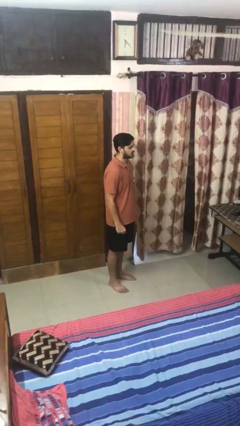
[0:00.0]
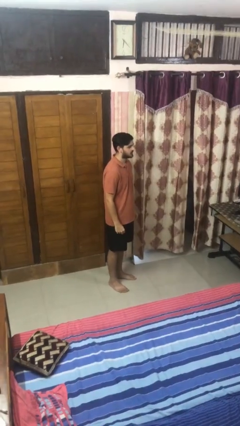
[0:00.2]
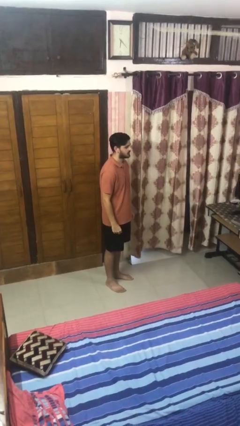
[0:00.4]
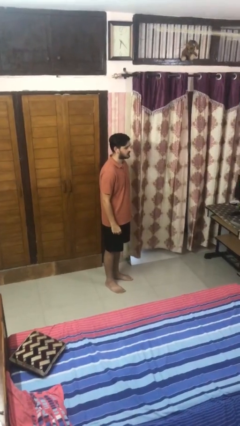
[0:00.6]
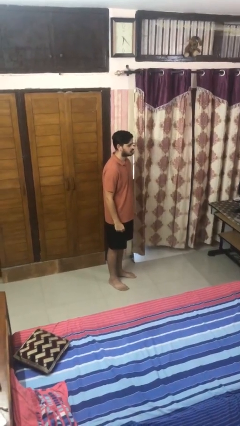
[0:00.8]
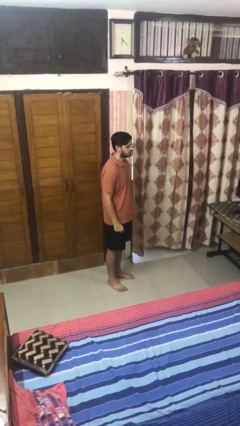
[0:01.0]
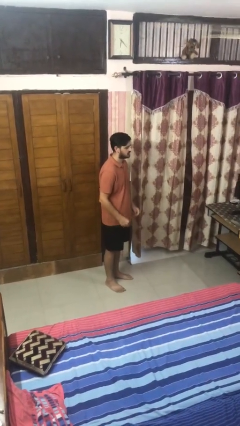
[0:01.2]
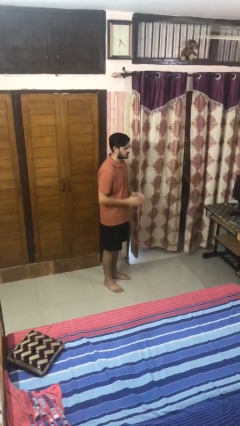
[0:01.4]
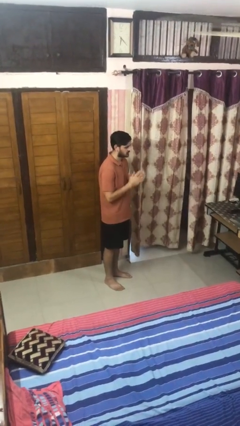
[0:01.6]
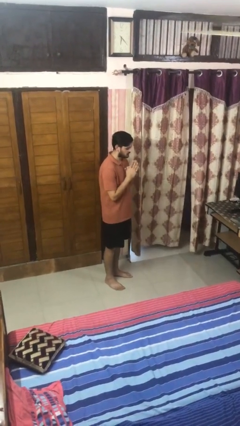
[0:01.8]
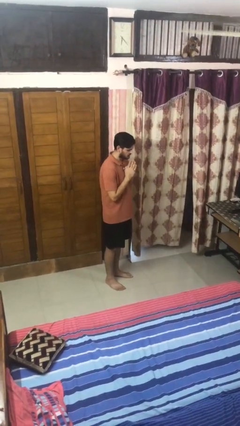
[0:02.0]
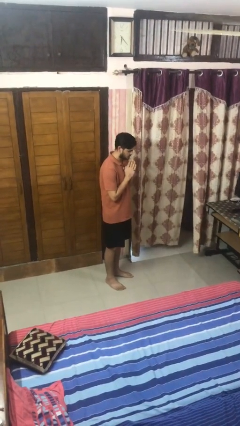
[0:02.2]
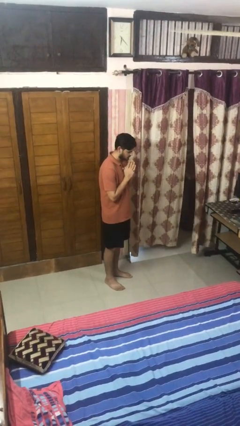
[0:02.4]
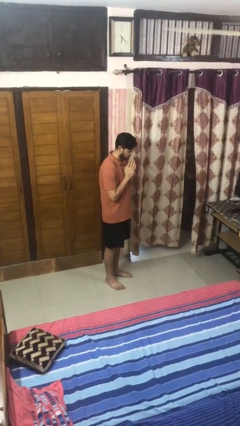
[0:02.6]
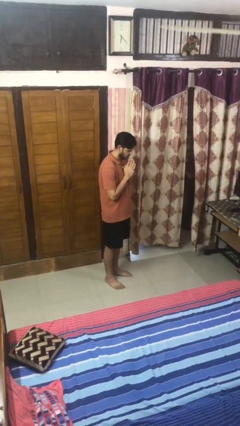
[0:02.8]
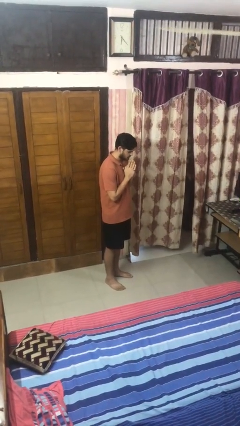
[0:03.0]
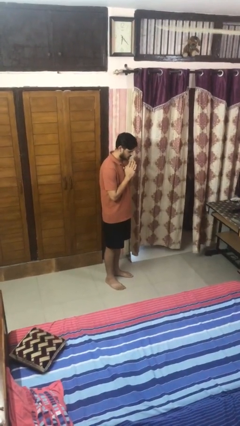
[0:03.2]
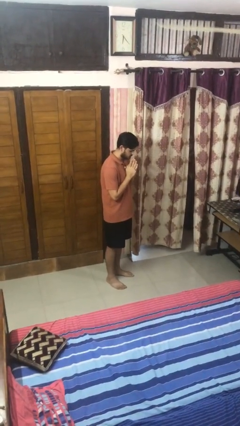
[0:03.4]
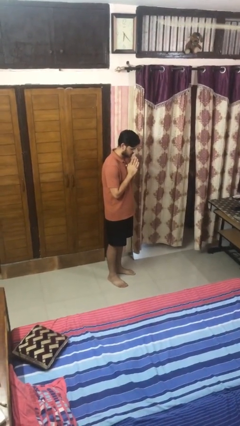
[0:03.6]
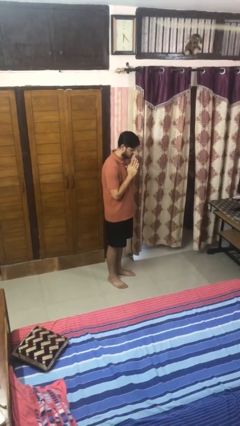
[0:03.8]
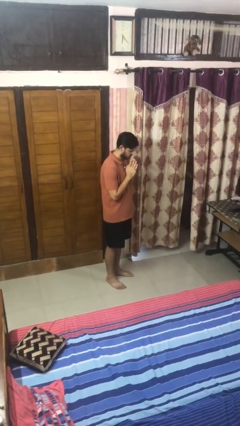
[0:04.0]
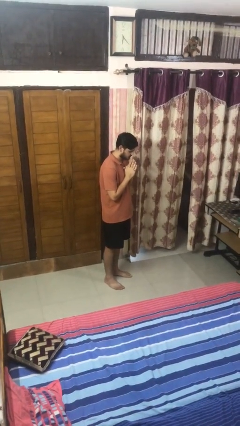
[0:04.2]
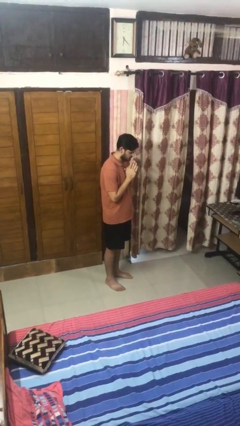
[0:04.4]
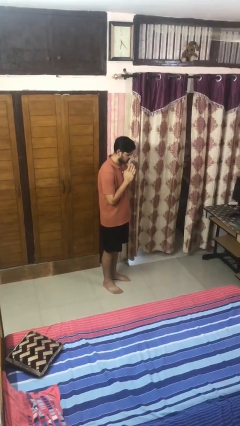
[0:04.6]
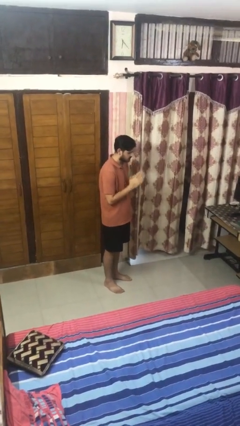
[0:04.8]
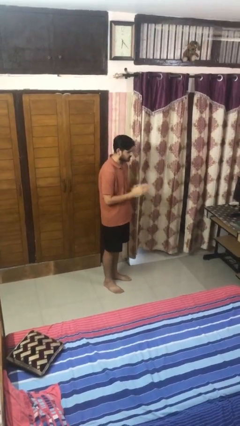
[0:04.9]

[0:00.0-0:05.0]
person prays

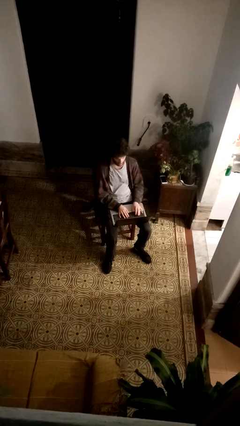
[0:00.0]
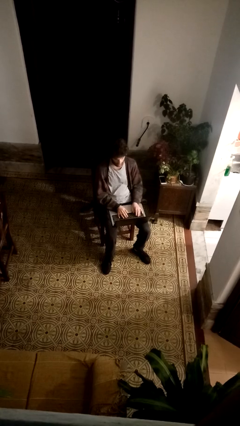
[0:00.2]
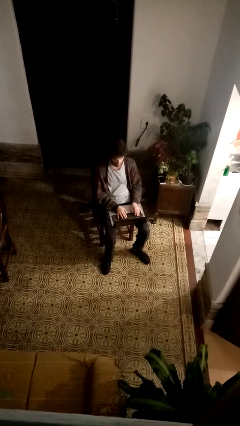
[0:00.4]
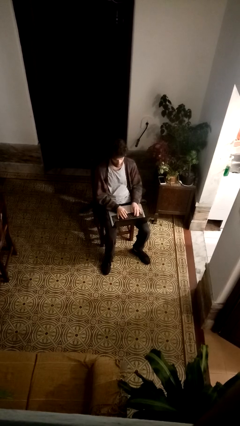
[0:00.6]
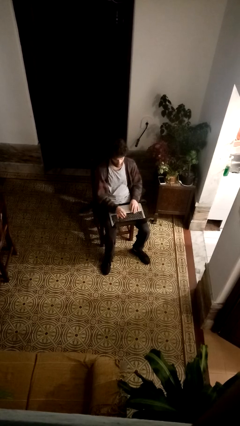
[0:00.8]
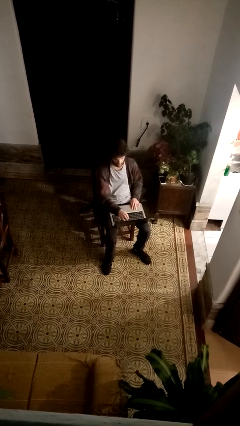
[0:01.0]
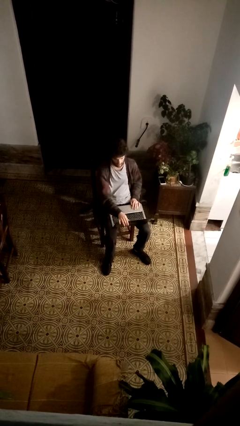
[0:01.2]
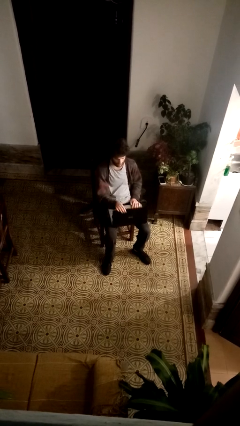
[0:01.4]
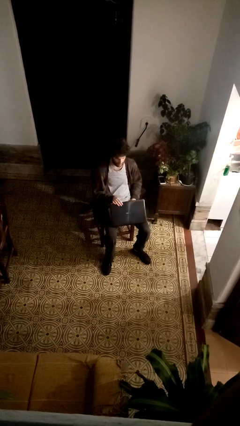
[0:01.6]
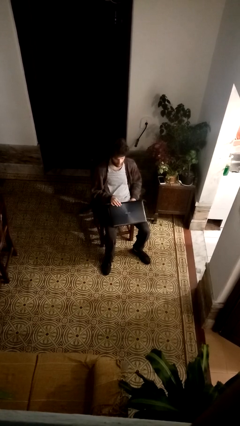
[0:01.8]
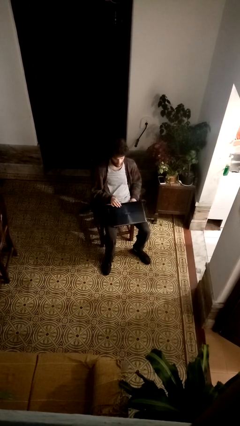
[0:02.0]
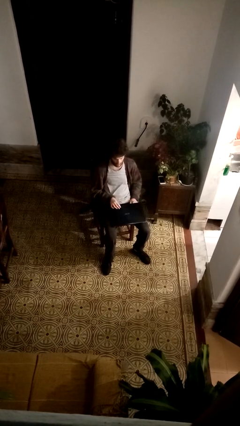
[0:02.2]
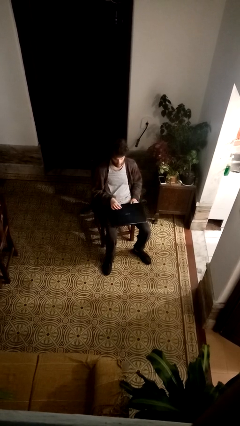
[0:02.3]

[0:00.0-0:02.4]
person closes laptop

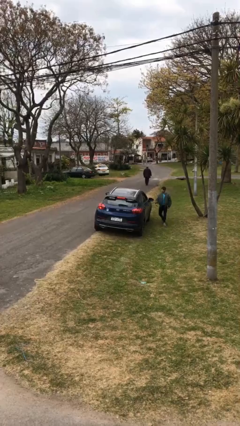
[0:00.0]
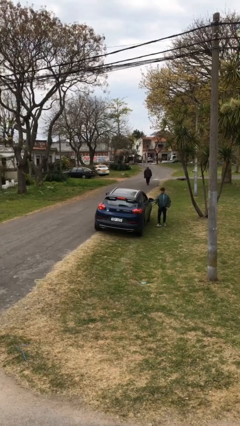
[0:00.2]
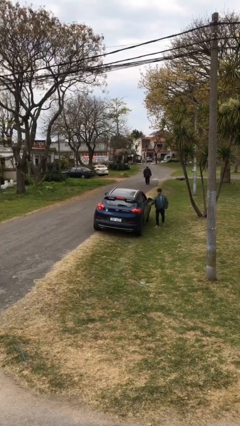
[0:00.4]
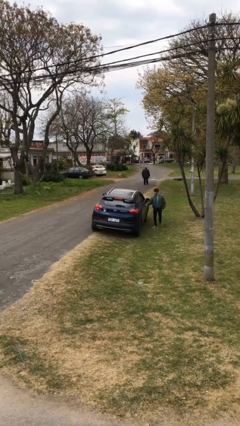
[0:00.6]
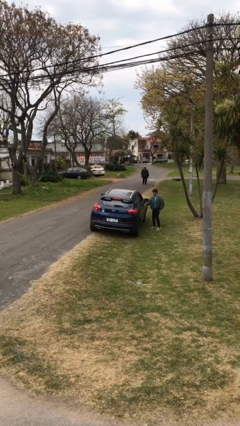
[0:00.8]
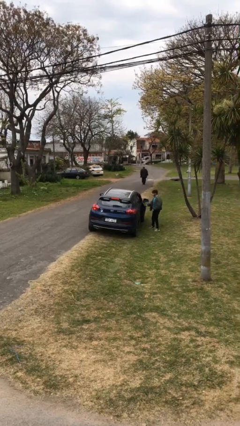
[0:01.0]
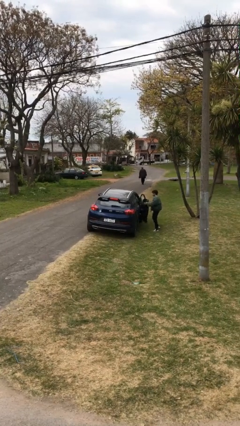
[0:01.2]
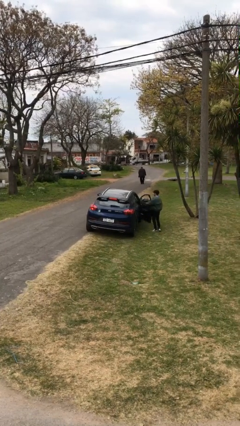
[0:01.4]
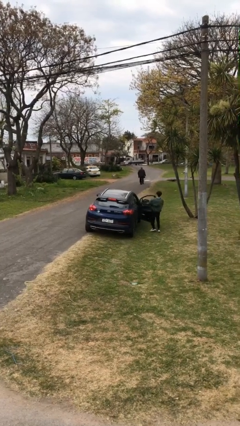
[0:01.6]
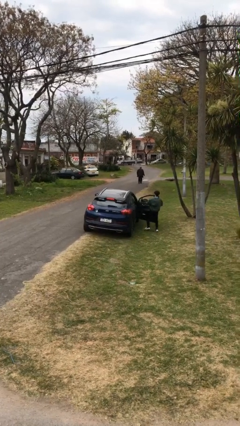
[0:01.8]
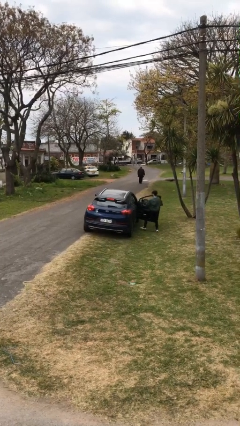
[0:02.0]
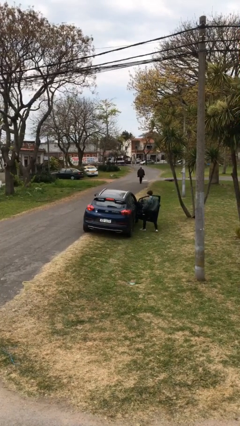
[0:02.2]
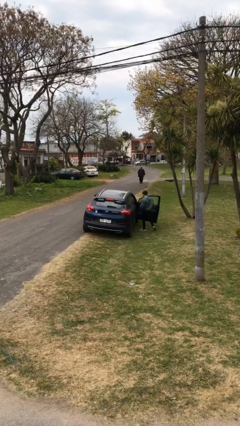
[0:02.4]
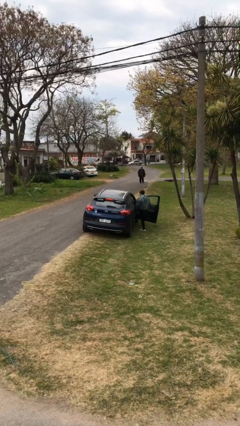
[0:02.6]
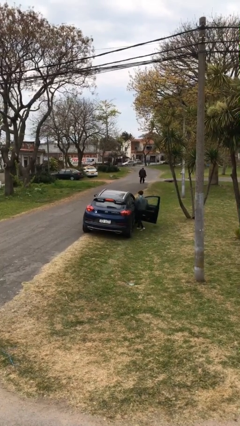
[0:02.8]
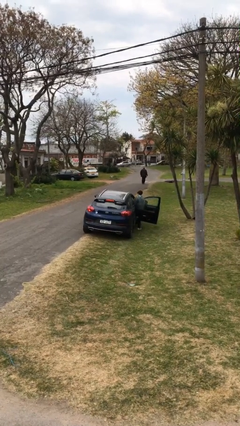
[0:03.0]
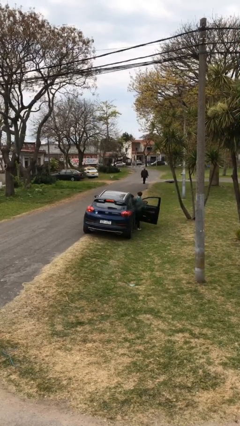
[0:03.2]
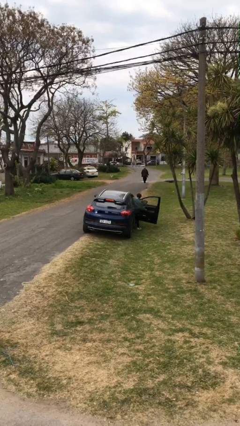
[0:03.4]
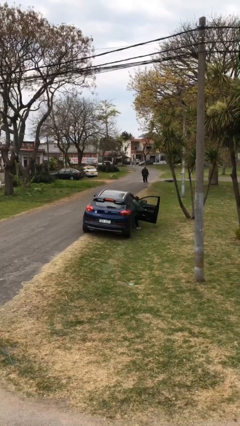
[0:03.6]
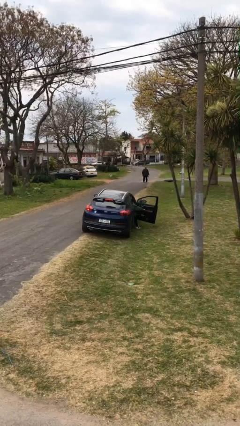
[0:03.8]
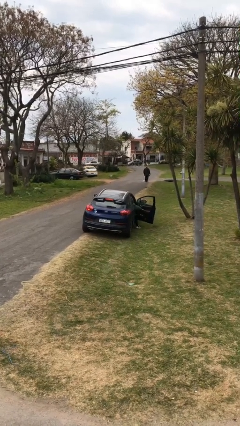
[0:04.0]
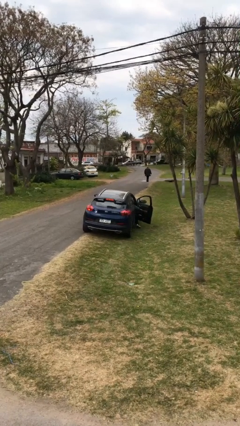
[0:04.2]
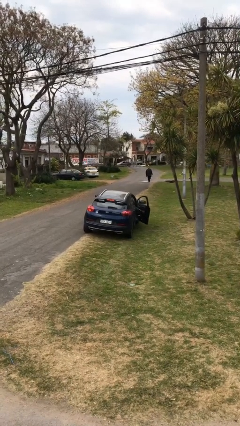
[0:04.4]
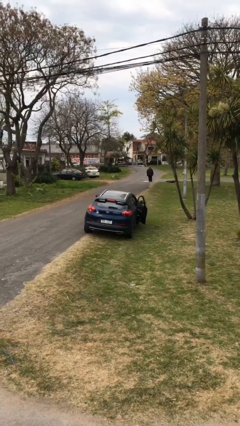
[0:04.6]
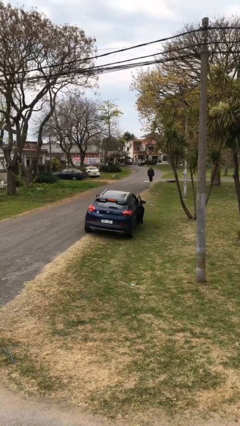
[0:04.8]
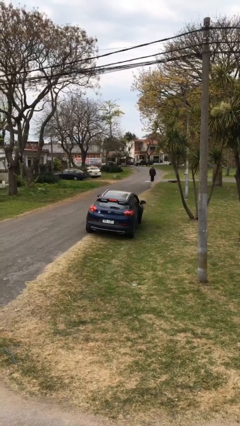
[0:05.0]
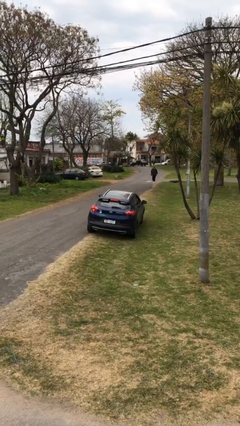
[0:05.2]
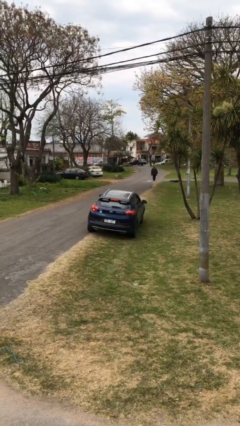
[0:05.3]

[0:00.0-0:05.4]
car picks up person

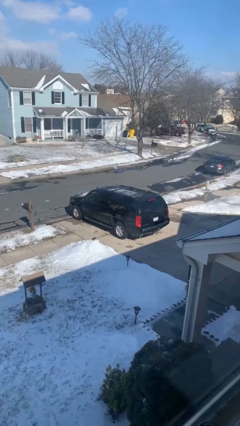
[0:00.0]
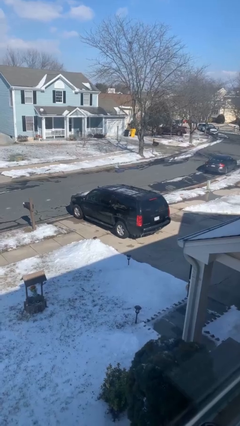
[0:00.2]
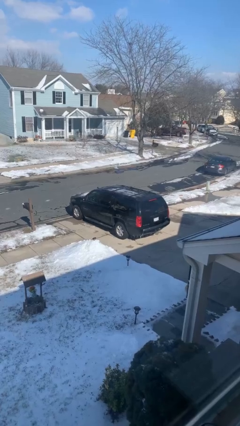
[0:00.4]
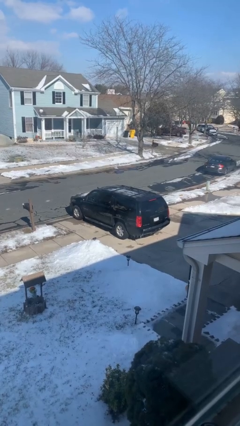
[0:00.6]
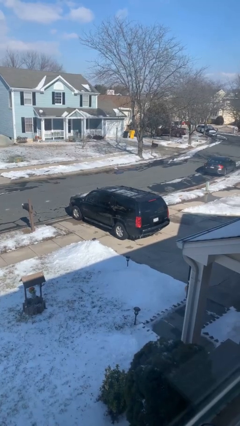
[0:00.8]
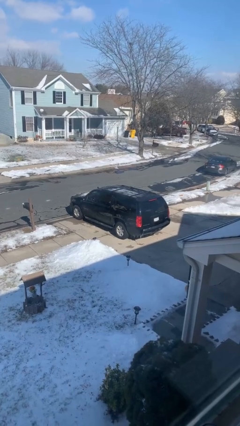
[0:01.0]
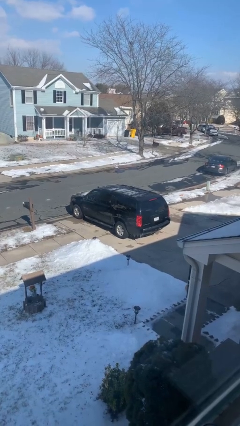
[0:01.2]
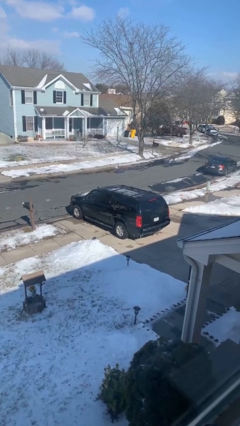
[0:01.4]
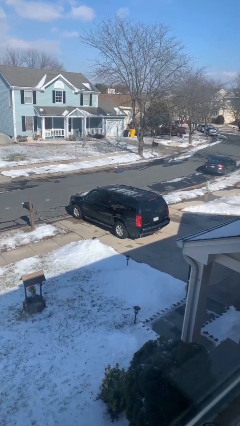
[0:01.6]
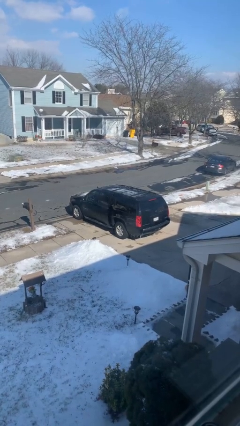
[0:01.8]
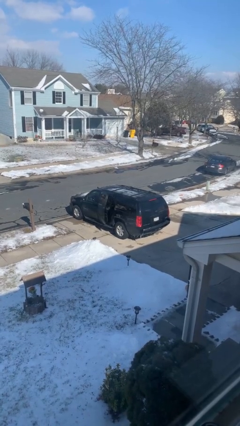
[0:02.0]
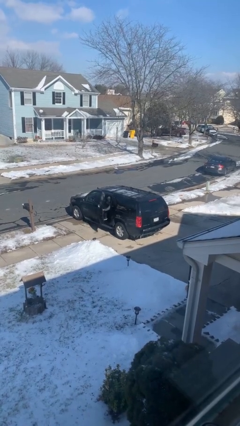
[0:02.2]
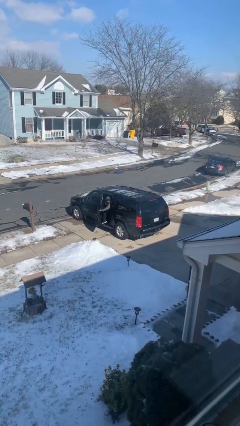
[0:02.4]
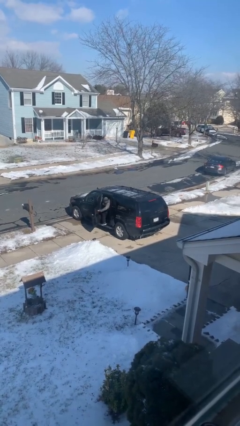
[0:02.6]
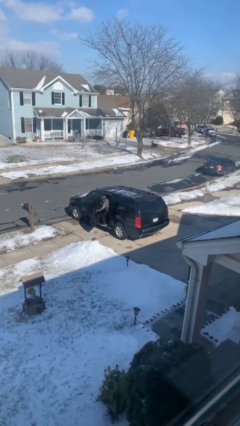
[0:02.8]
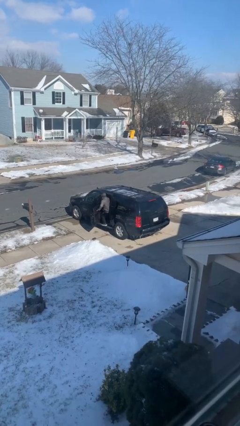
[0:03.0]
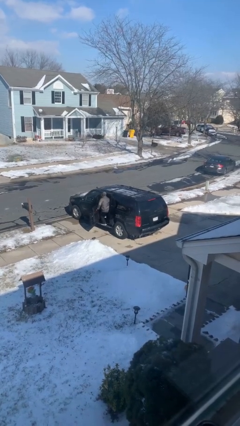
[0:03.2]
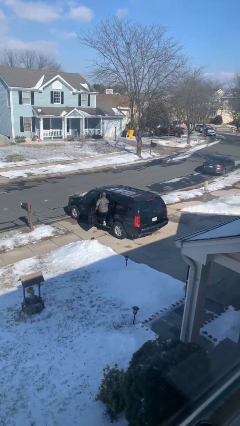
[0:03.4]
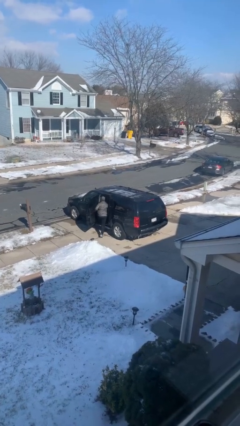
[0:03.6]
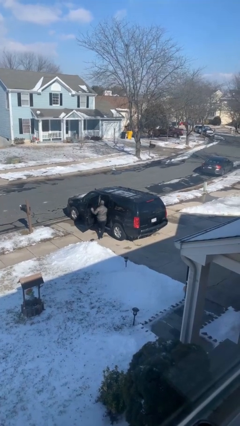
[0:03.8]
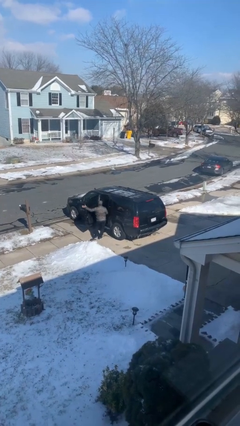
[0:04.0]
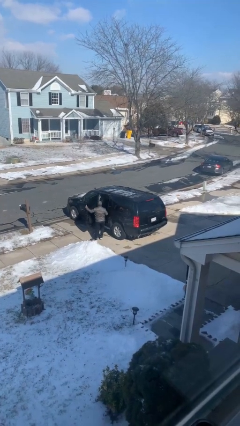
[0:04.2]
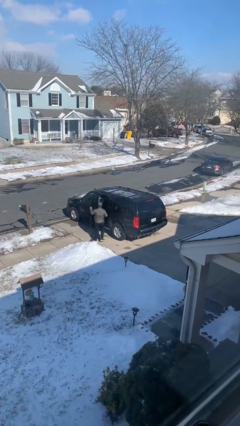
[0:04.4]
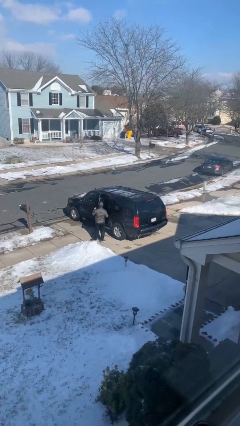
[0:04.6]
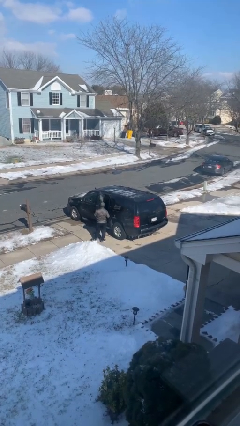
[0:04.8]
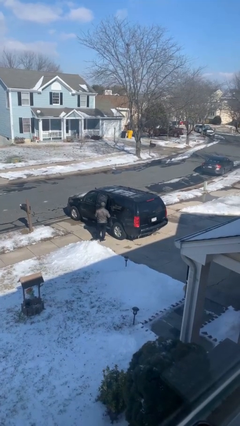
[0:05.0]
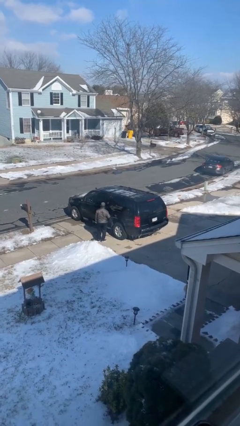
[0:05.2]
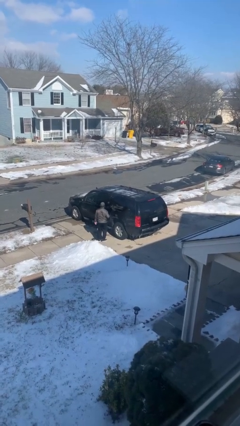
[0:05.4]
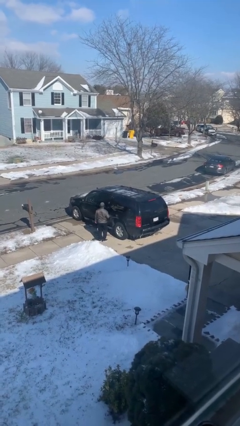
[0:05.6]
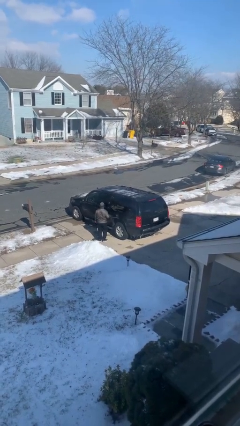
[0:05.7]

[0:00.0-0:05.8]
car drops off person
